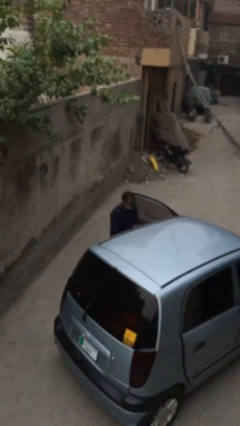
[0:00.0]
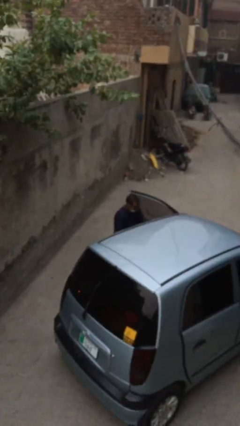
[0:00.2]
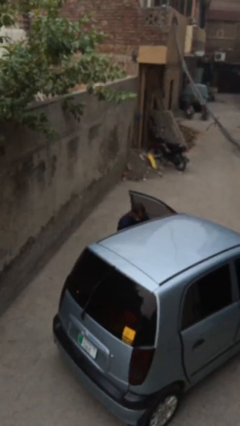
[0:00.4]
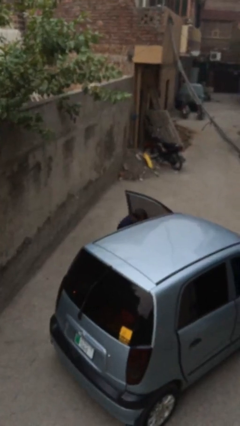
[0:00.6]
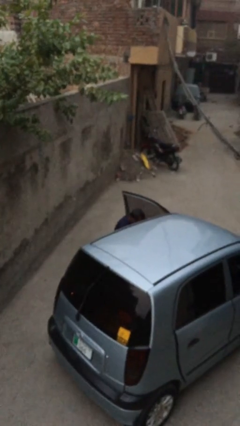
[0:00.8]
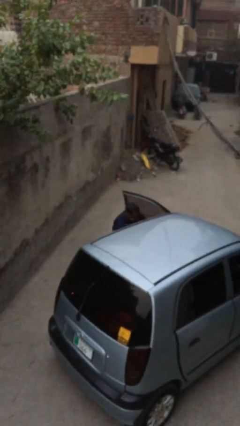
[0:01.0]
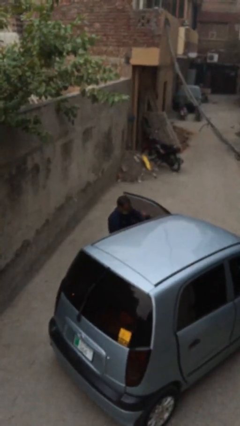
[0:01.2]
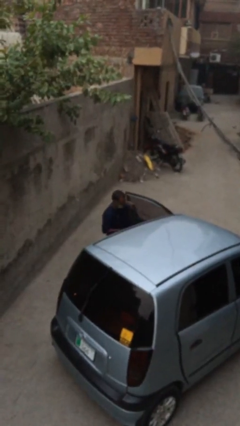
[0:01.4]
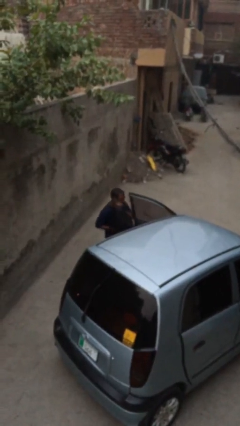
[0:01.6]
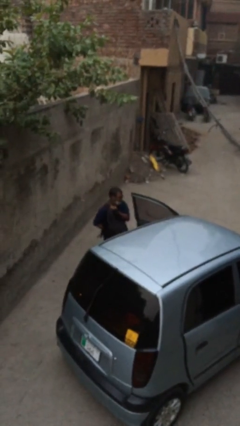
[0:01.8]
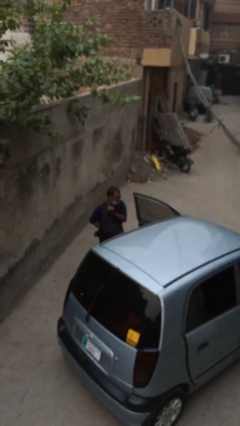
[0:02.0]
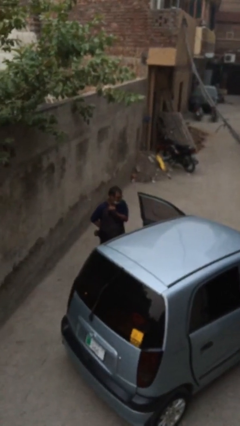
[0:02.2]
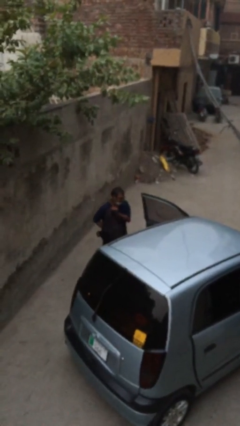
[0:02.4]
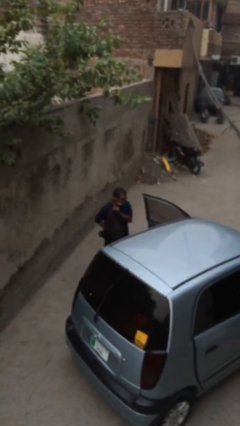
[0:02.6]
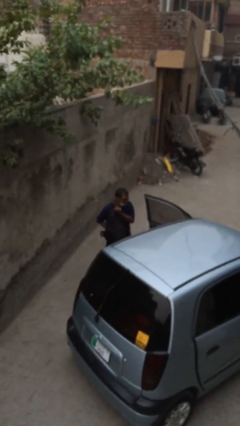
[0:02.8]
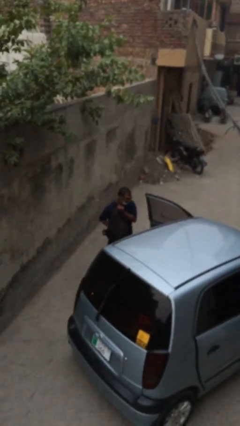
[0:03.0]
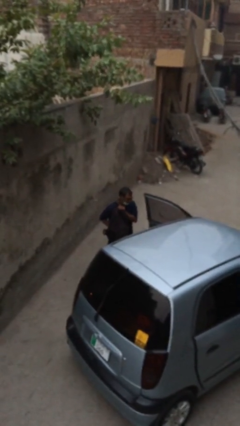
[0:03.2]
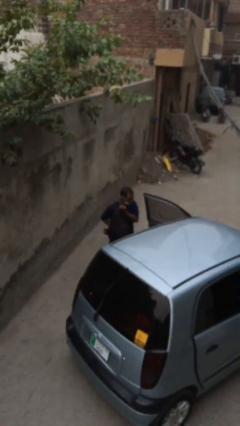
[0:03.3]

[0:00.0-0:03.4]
person unloads car

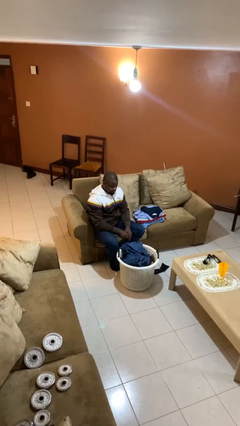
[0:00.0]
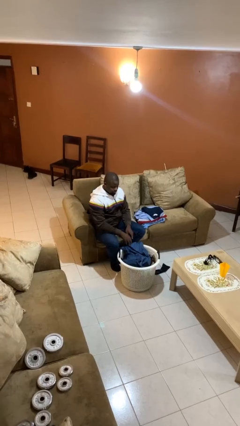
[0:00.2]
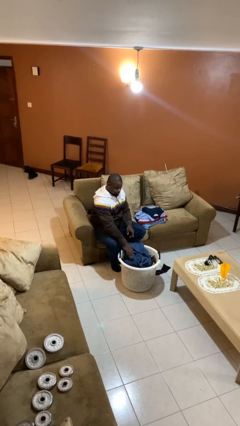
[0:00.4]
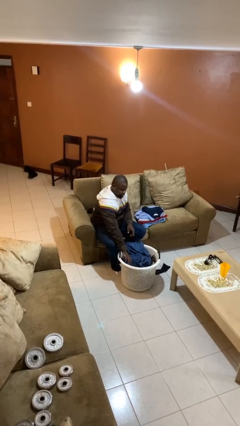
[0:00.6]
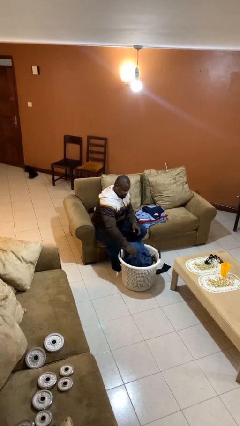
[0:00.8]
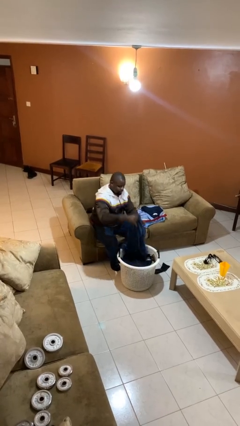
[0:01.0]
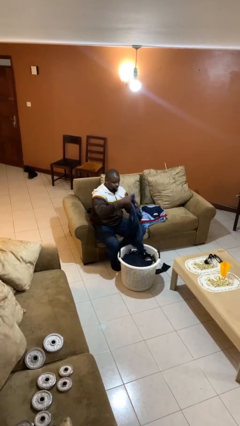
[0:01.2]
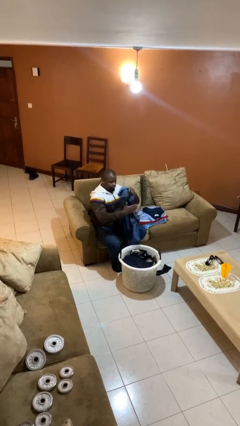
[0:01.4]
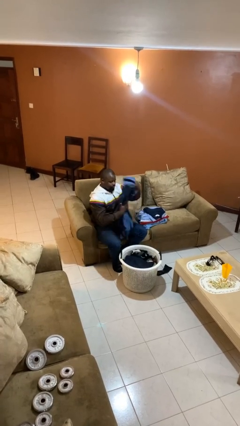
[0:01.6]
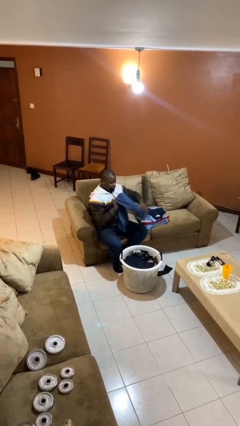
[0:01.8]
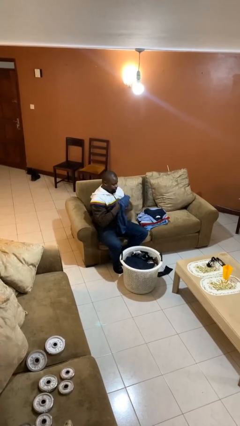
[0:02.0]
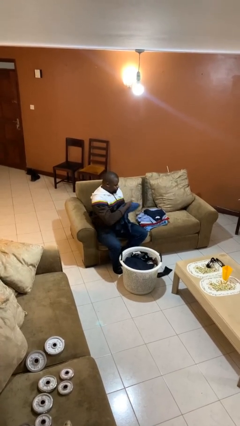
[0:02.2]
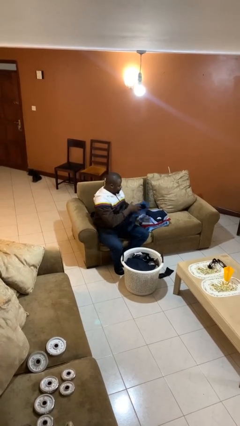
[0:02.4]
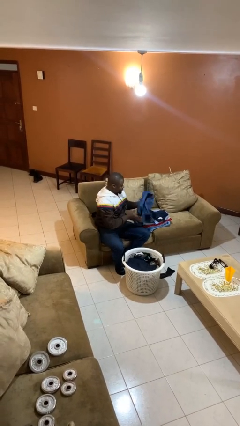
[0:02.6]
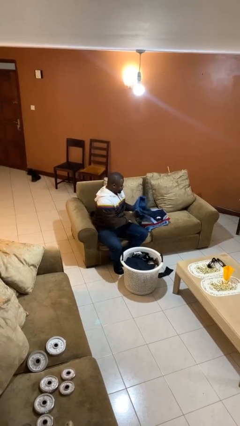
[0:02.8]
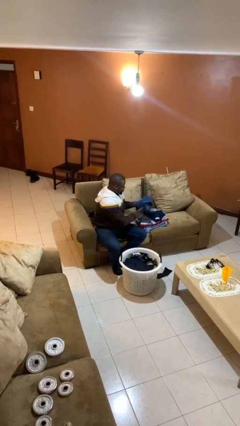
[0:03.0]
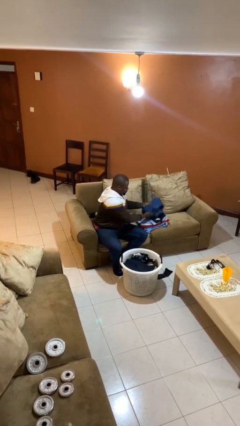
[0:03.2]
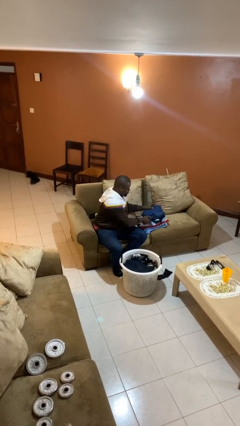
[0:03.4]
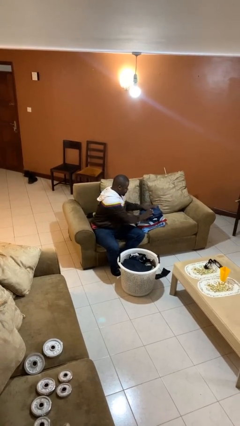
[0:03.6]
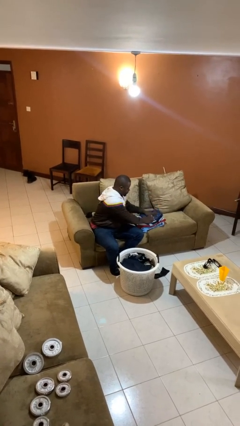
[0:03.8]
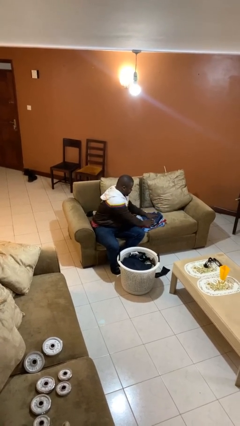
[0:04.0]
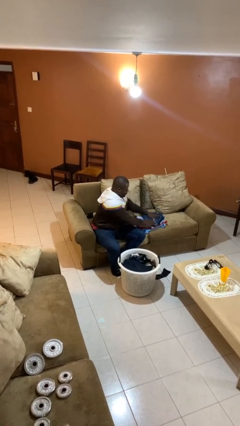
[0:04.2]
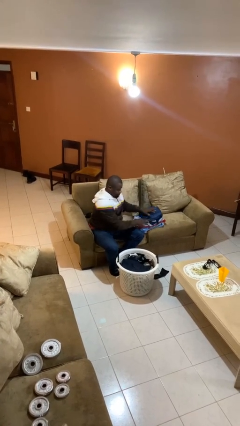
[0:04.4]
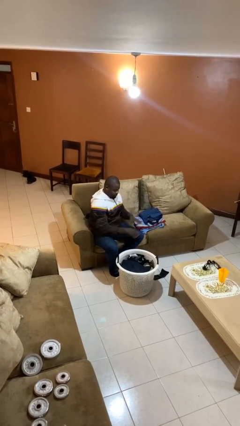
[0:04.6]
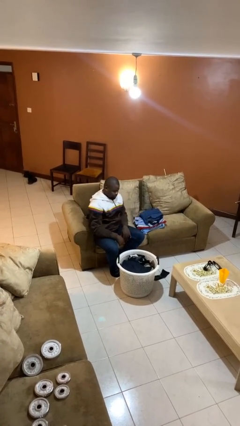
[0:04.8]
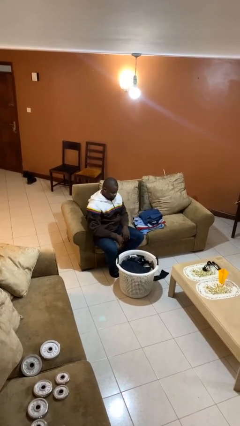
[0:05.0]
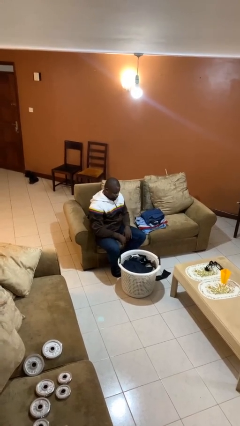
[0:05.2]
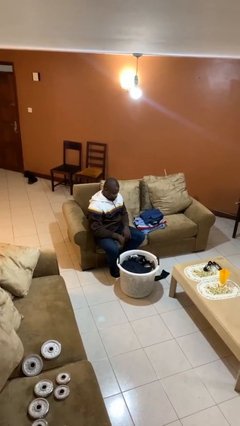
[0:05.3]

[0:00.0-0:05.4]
person folds shirt

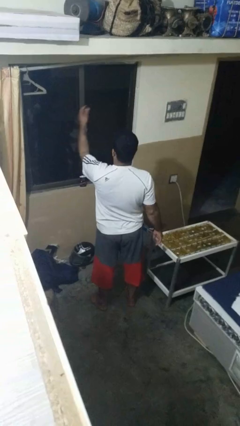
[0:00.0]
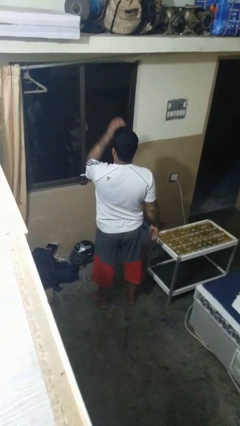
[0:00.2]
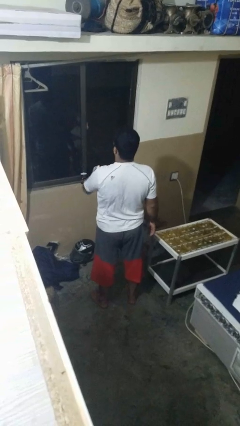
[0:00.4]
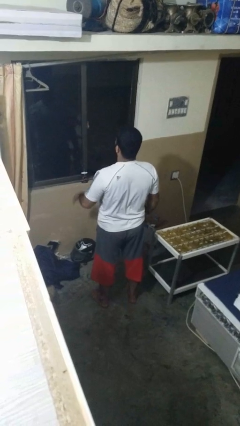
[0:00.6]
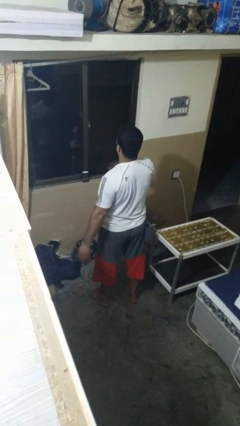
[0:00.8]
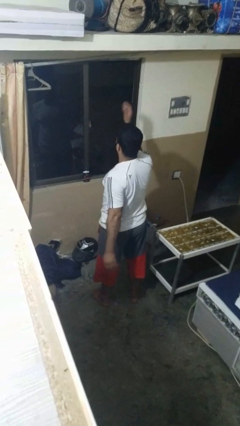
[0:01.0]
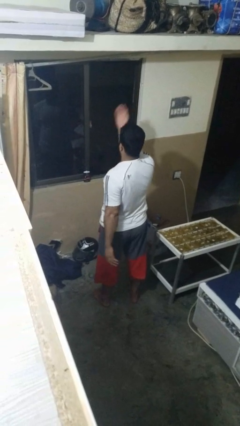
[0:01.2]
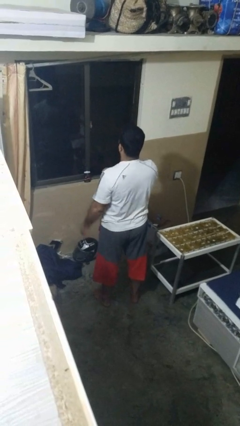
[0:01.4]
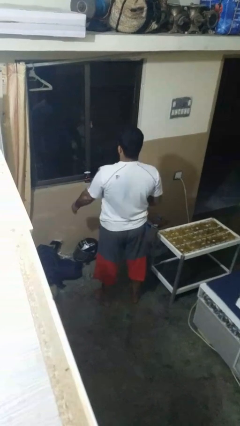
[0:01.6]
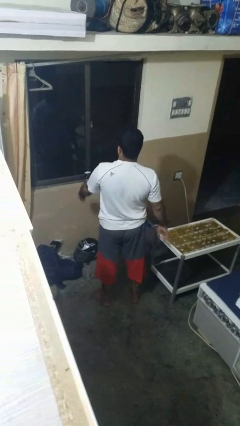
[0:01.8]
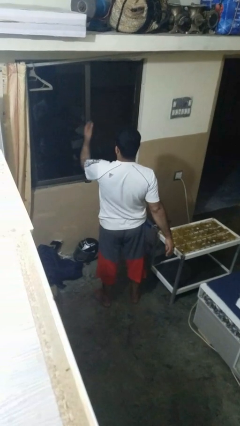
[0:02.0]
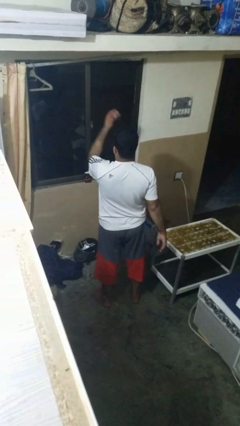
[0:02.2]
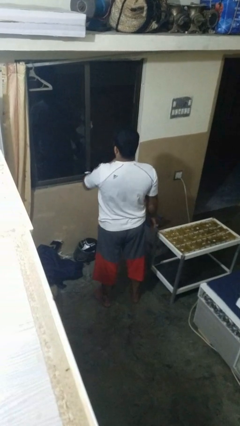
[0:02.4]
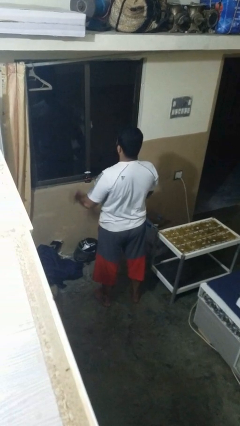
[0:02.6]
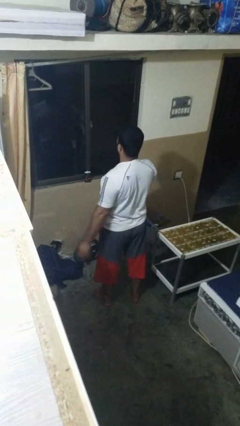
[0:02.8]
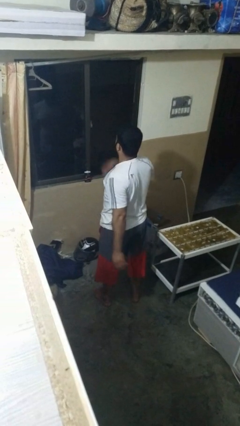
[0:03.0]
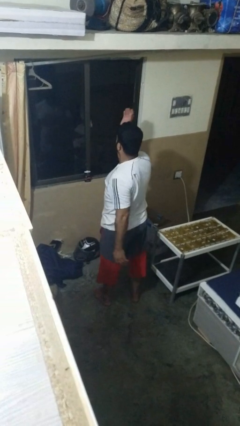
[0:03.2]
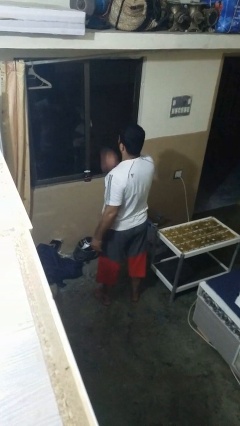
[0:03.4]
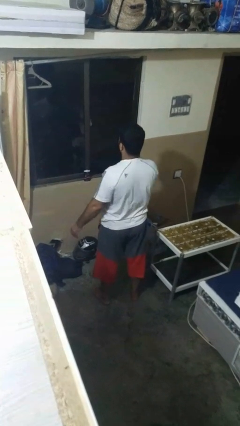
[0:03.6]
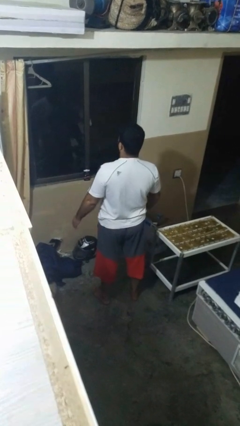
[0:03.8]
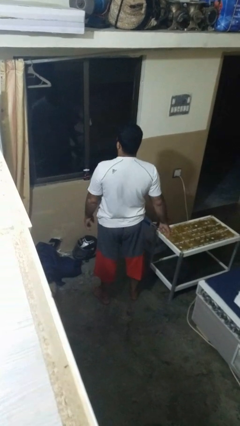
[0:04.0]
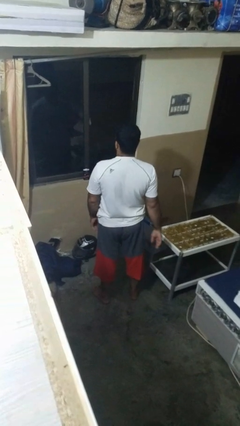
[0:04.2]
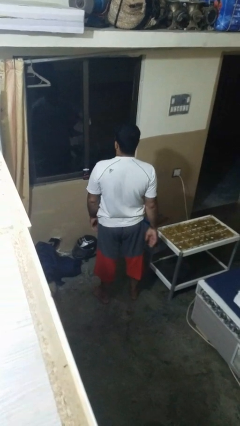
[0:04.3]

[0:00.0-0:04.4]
person drums on chest

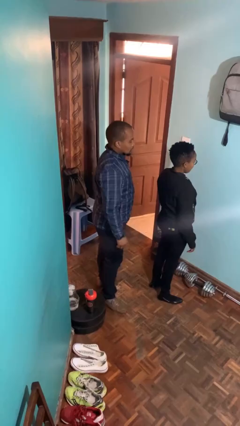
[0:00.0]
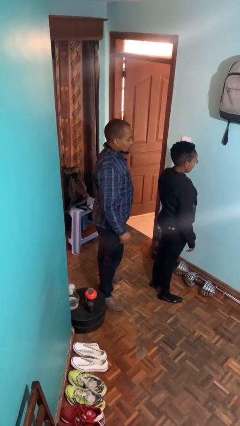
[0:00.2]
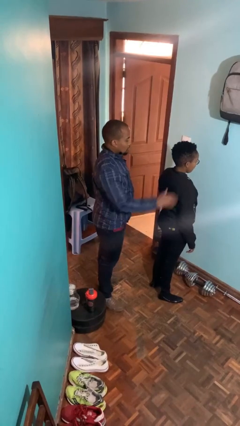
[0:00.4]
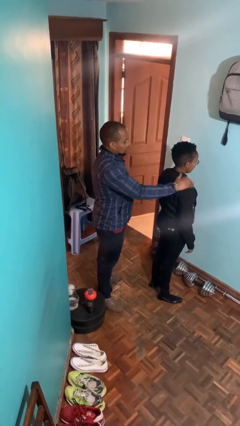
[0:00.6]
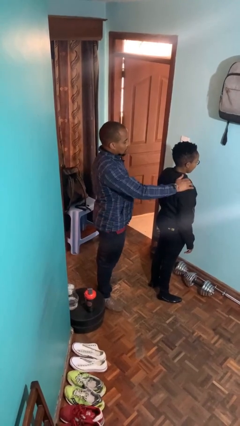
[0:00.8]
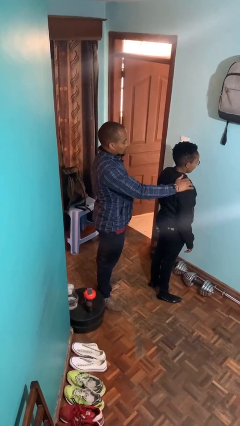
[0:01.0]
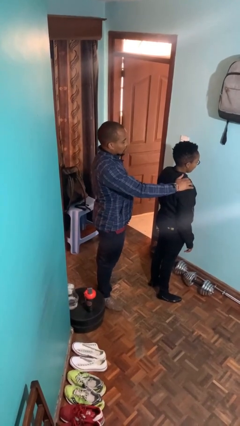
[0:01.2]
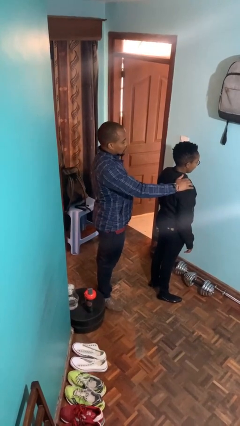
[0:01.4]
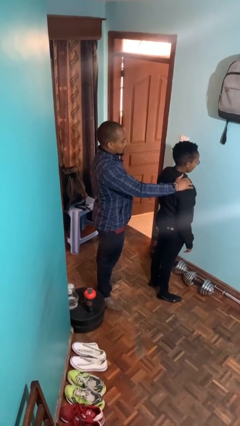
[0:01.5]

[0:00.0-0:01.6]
person grabs person by shoulder

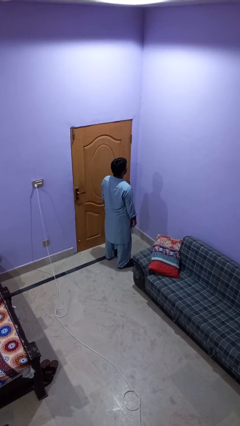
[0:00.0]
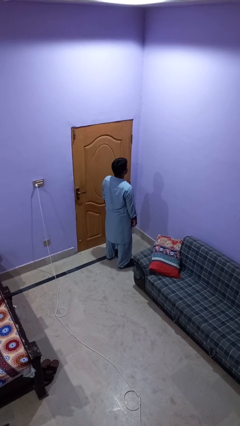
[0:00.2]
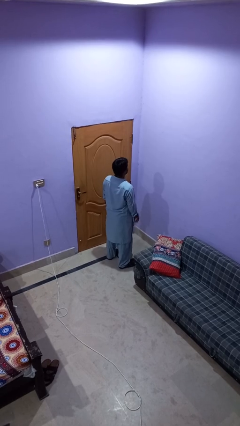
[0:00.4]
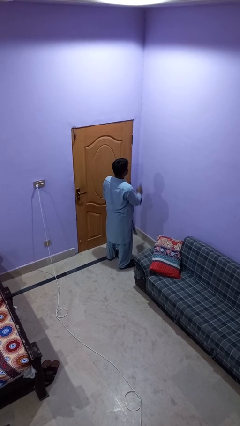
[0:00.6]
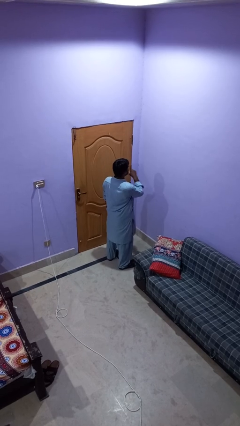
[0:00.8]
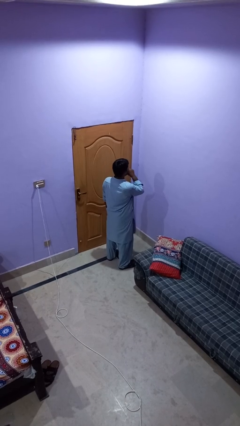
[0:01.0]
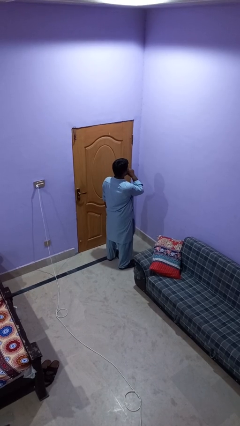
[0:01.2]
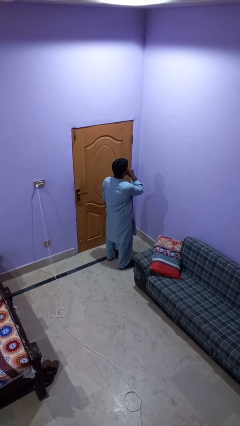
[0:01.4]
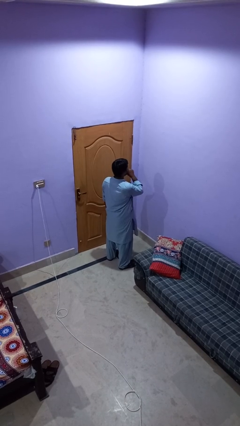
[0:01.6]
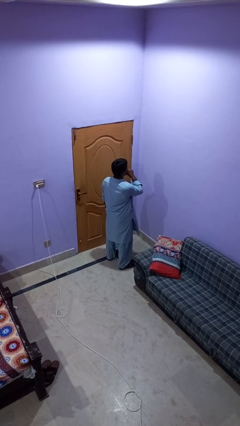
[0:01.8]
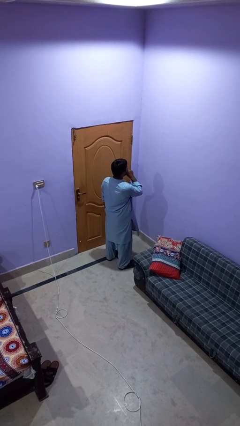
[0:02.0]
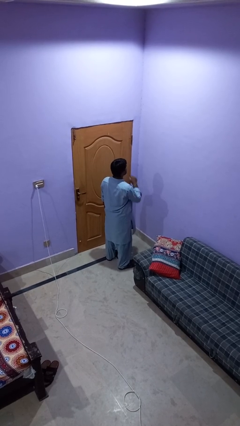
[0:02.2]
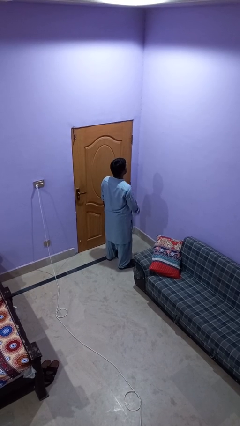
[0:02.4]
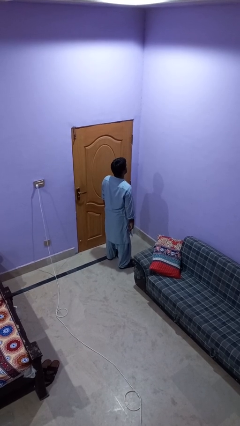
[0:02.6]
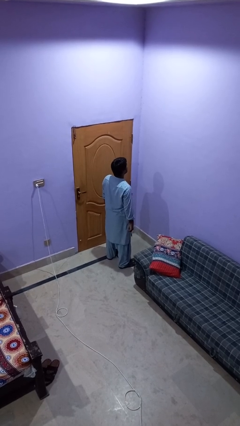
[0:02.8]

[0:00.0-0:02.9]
person gestures be quiet

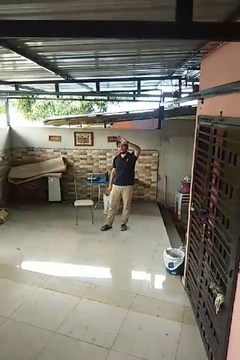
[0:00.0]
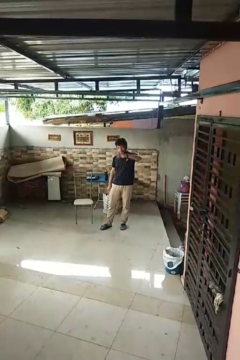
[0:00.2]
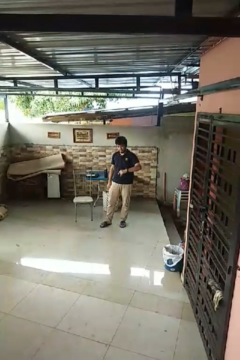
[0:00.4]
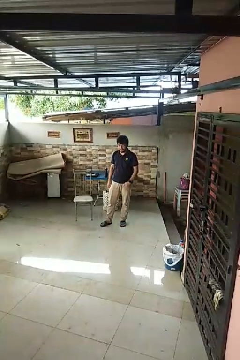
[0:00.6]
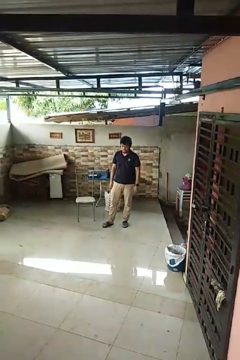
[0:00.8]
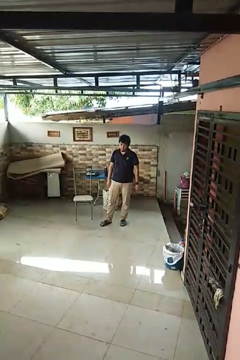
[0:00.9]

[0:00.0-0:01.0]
person gestures swipe down
